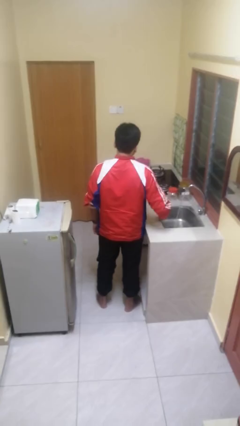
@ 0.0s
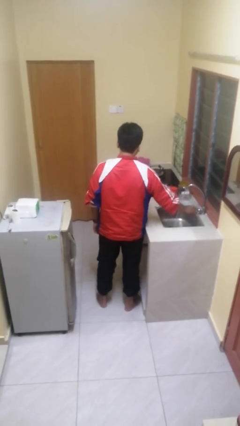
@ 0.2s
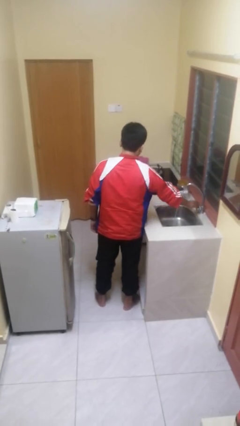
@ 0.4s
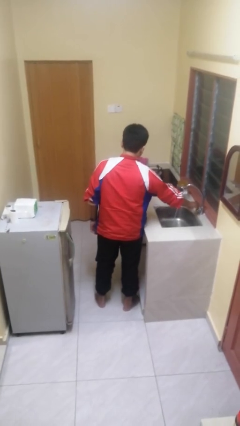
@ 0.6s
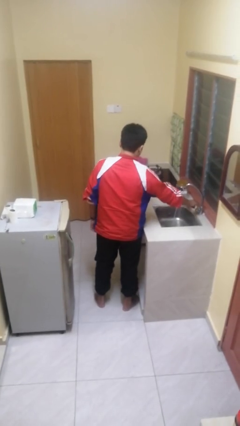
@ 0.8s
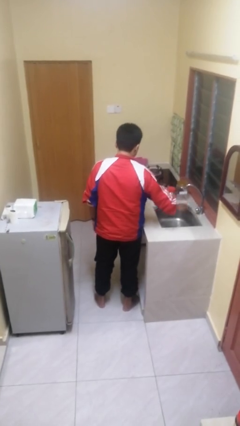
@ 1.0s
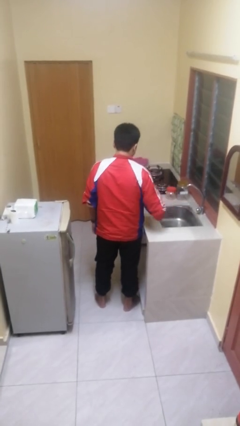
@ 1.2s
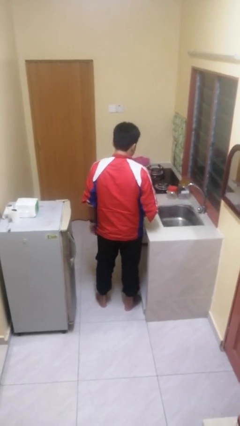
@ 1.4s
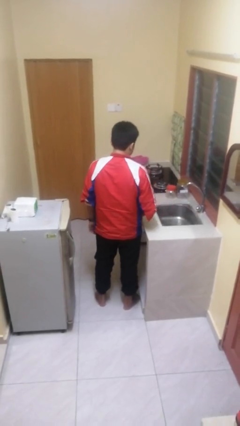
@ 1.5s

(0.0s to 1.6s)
person turns off faucet

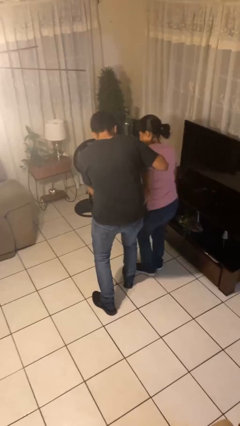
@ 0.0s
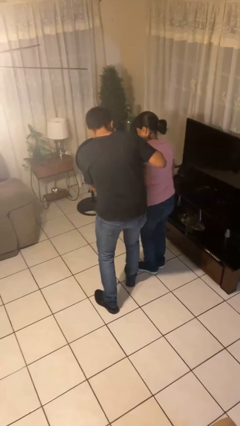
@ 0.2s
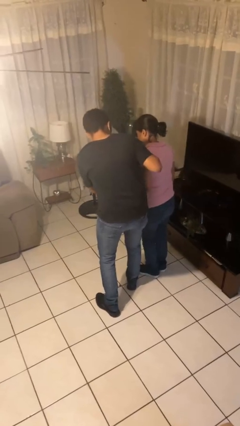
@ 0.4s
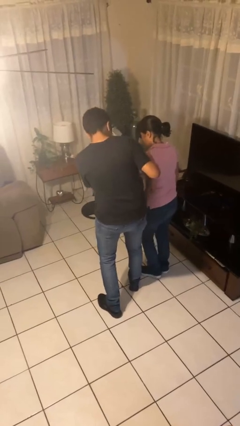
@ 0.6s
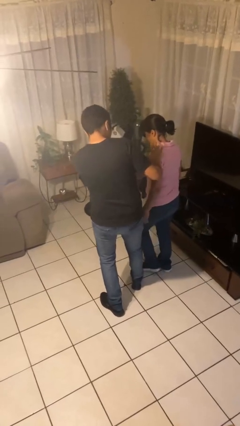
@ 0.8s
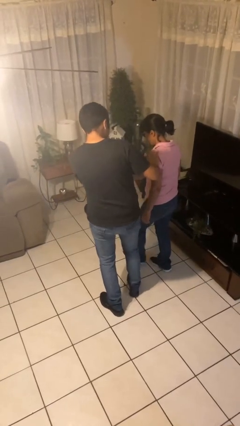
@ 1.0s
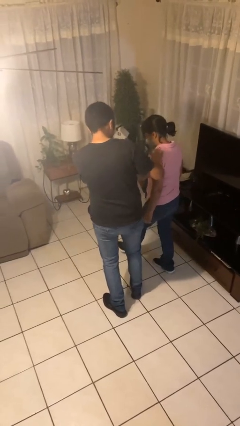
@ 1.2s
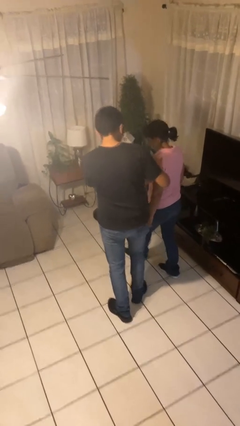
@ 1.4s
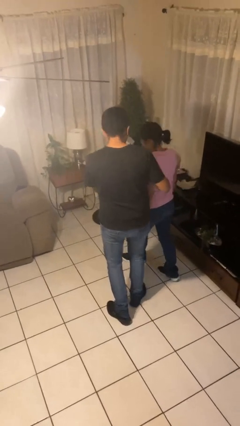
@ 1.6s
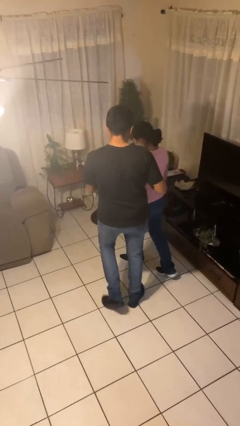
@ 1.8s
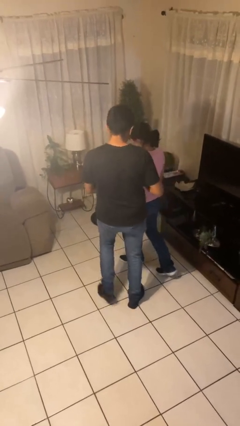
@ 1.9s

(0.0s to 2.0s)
person bumps into person

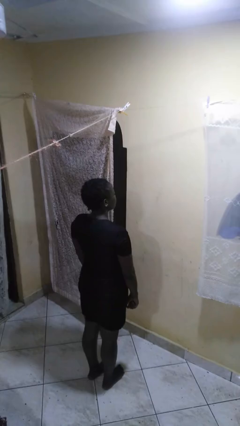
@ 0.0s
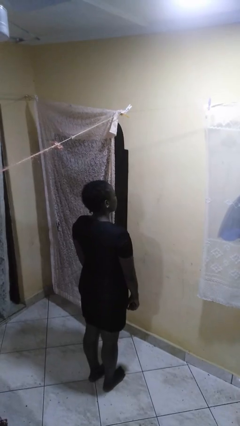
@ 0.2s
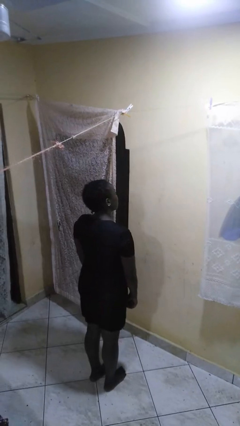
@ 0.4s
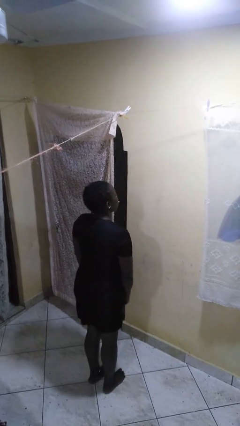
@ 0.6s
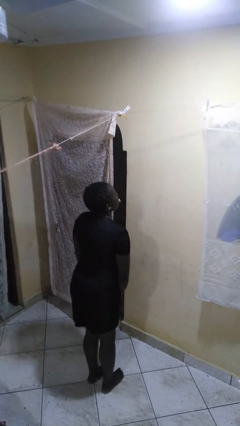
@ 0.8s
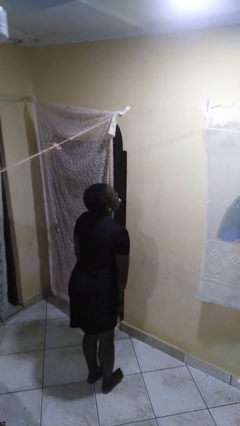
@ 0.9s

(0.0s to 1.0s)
person sticks out tongue

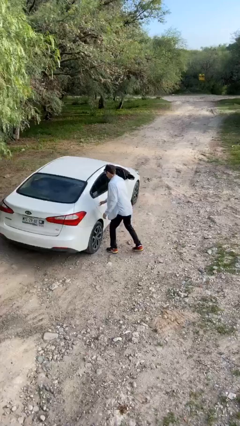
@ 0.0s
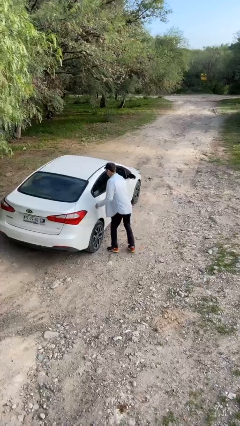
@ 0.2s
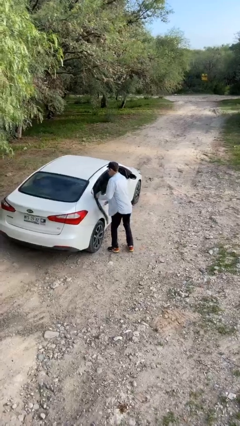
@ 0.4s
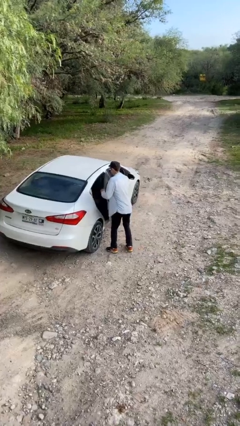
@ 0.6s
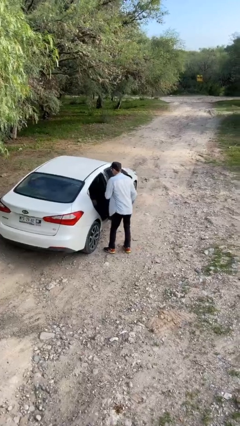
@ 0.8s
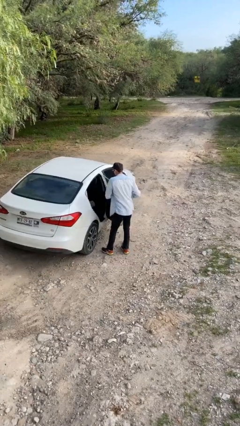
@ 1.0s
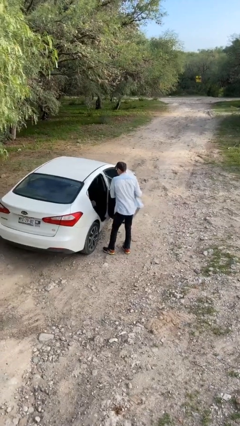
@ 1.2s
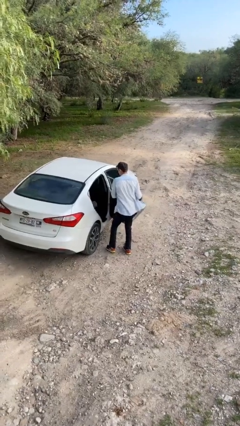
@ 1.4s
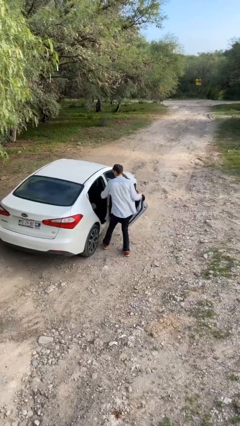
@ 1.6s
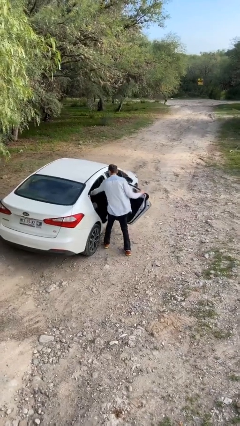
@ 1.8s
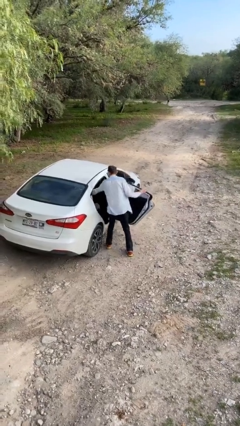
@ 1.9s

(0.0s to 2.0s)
person opens car door

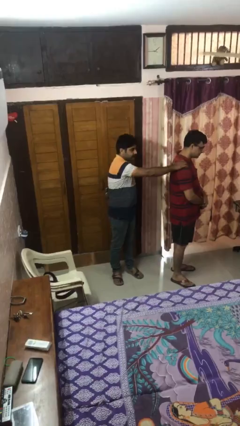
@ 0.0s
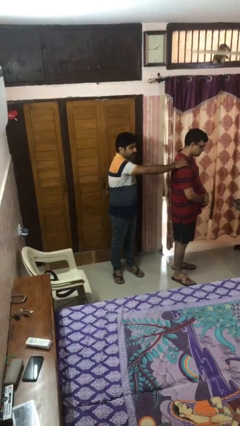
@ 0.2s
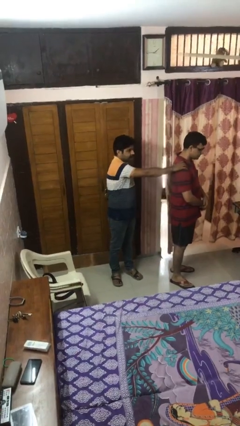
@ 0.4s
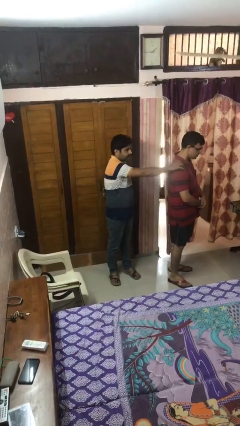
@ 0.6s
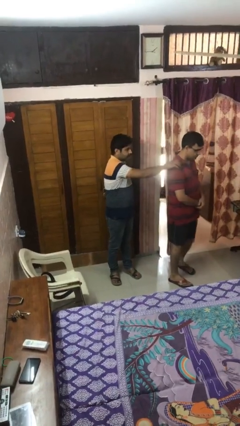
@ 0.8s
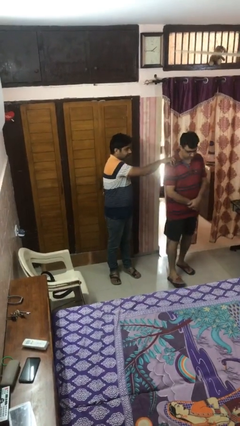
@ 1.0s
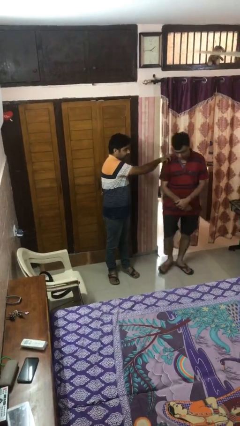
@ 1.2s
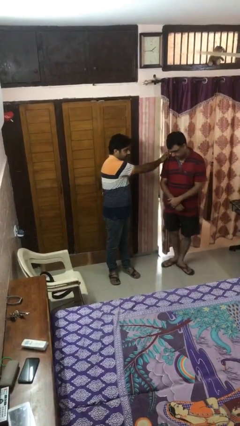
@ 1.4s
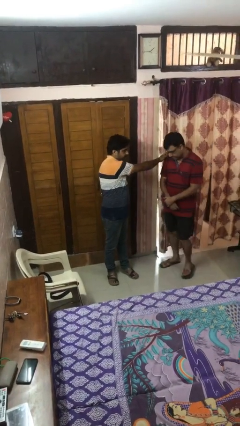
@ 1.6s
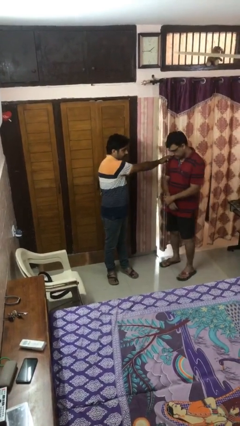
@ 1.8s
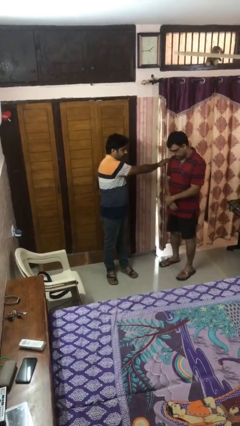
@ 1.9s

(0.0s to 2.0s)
person spins person around

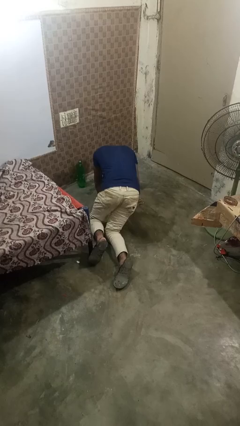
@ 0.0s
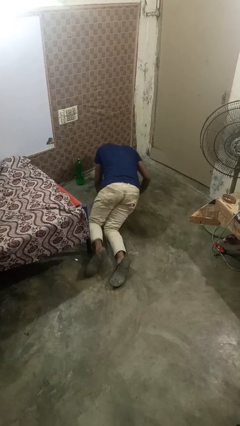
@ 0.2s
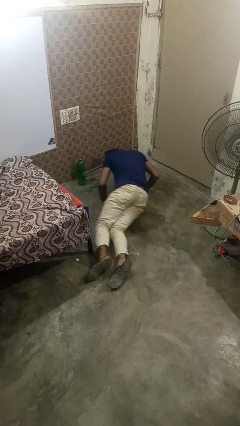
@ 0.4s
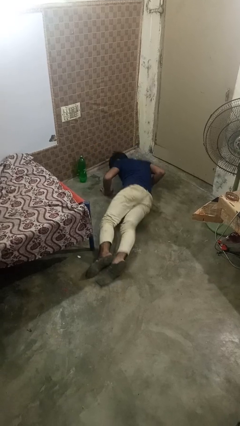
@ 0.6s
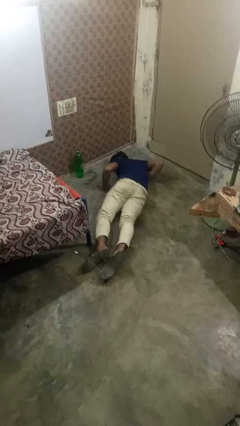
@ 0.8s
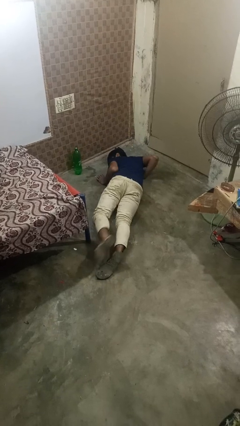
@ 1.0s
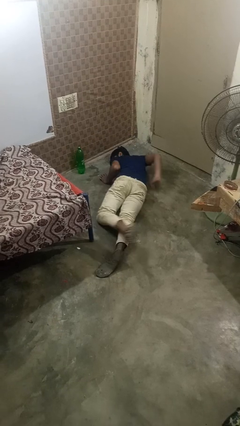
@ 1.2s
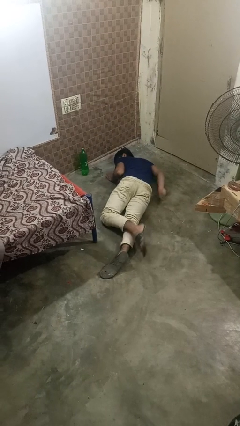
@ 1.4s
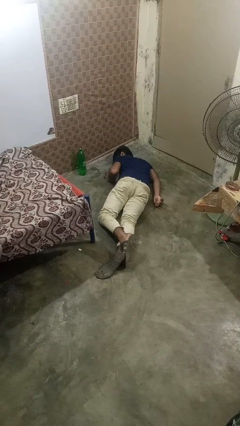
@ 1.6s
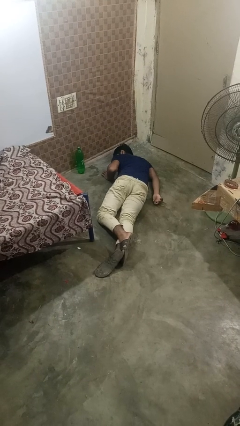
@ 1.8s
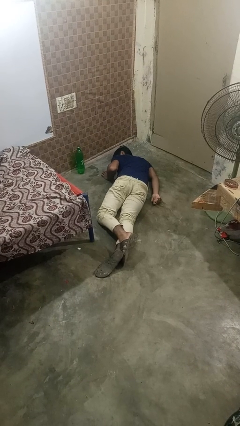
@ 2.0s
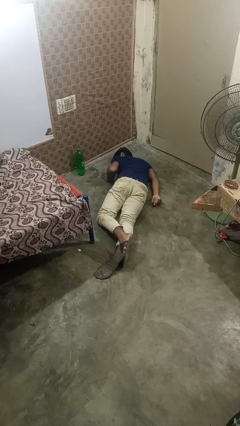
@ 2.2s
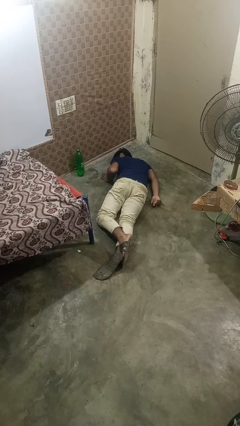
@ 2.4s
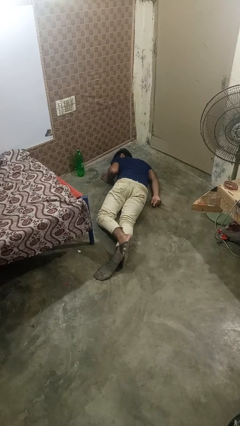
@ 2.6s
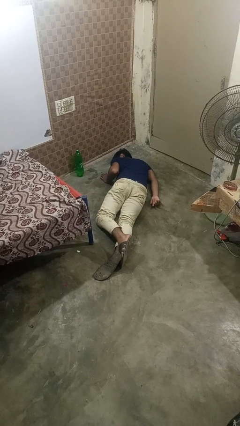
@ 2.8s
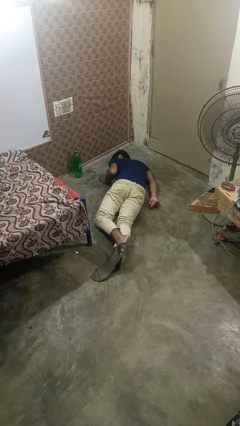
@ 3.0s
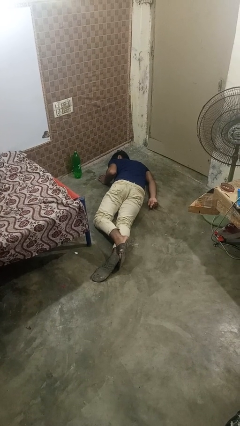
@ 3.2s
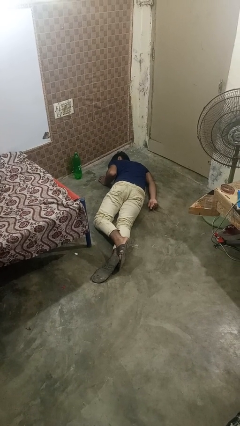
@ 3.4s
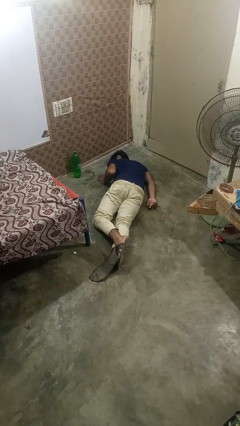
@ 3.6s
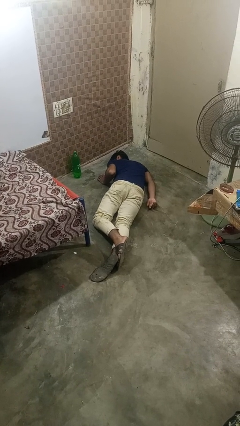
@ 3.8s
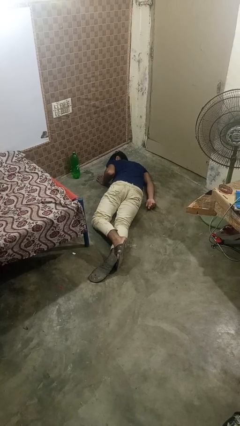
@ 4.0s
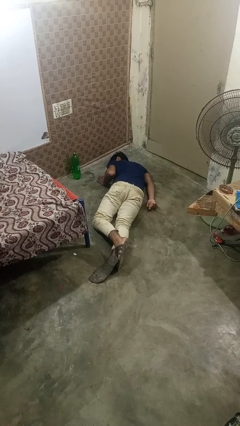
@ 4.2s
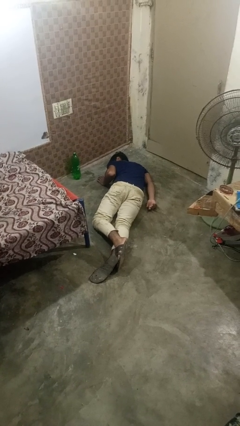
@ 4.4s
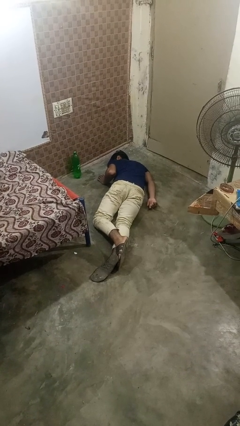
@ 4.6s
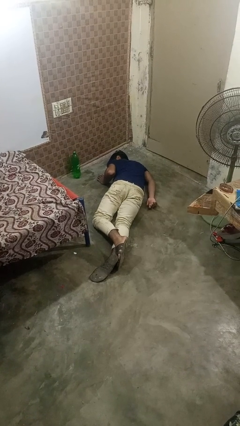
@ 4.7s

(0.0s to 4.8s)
person lies down on floor

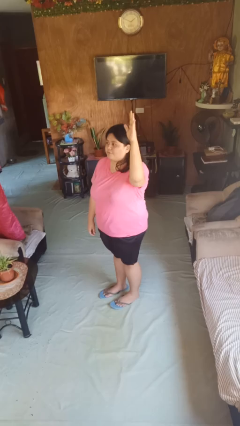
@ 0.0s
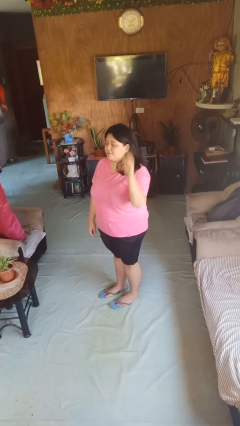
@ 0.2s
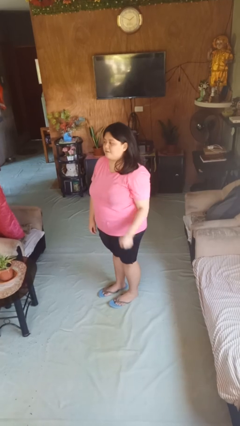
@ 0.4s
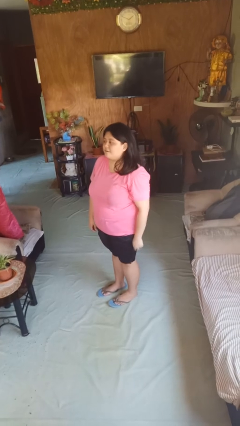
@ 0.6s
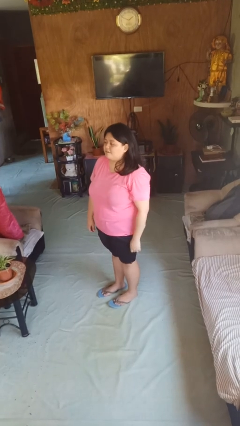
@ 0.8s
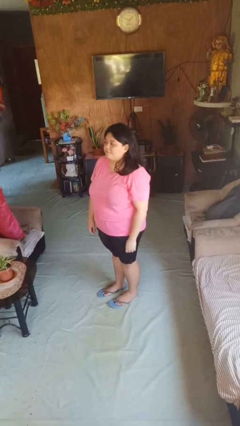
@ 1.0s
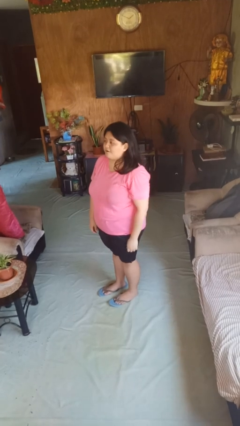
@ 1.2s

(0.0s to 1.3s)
person gestures lower hand

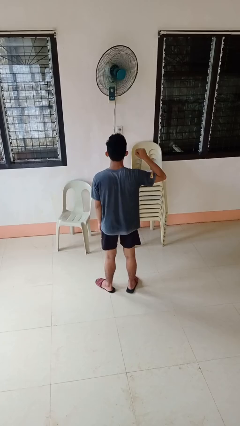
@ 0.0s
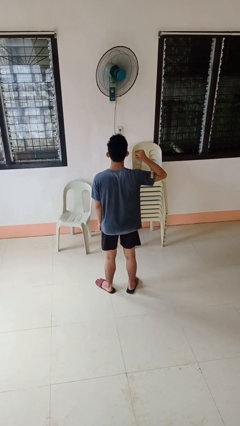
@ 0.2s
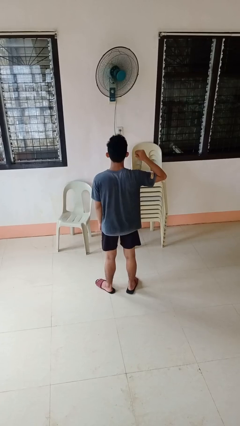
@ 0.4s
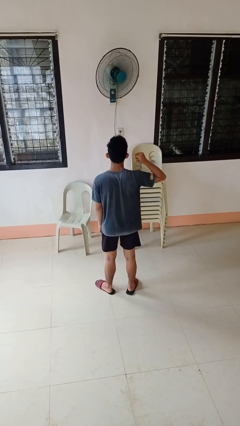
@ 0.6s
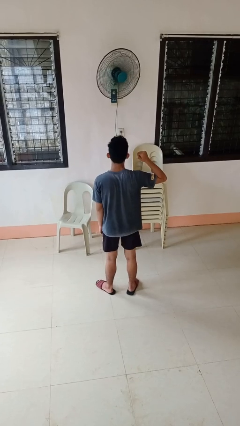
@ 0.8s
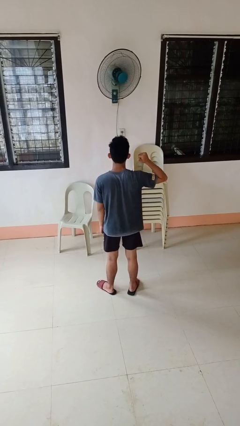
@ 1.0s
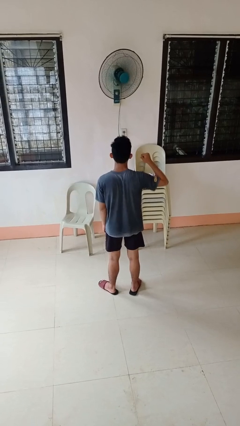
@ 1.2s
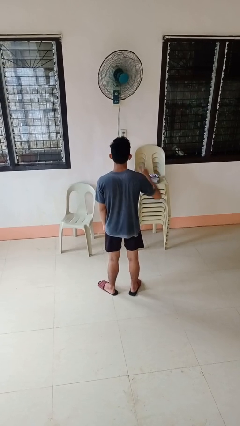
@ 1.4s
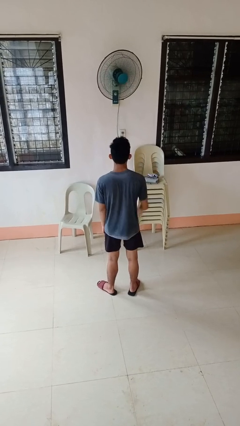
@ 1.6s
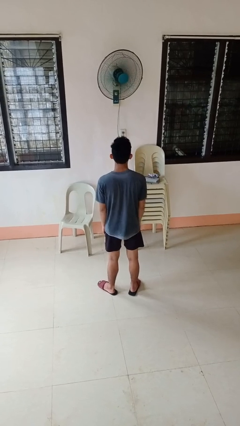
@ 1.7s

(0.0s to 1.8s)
person gestures behind me

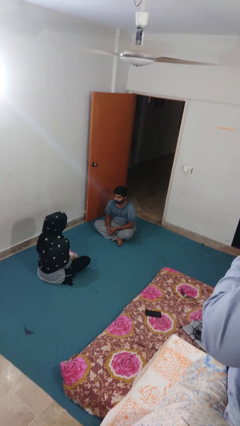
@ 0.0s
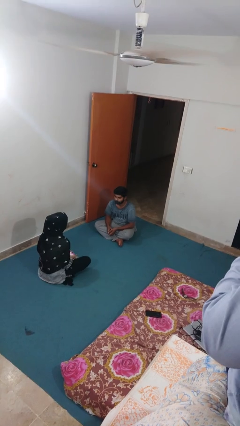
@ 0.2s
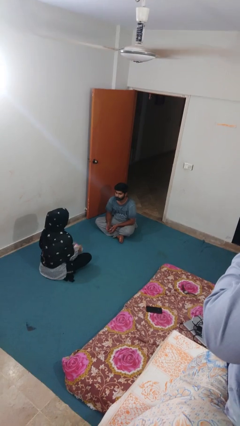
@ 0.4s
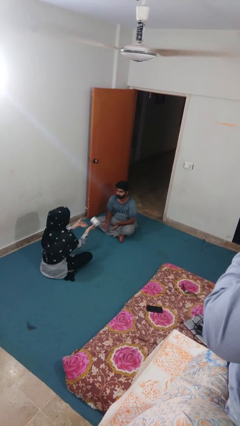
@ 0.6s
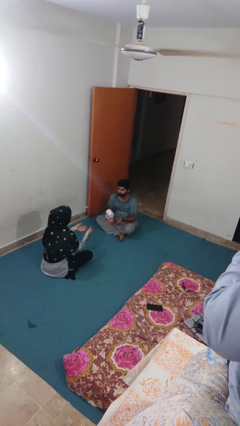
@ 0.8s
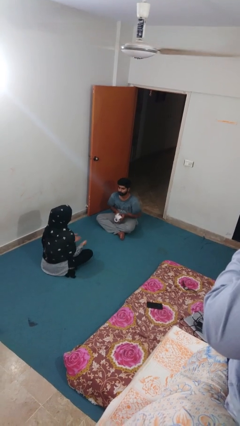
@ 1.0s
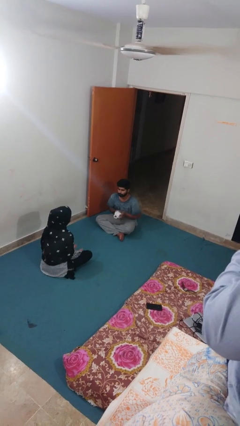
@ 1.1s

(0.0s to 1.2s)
person catches object from person
